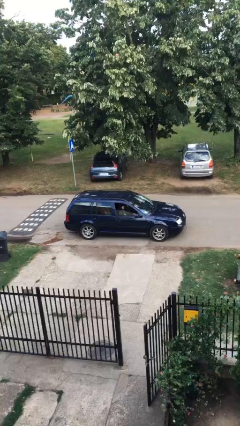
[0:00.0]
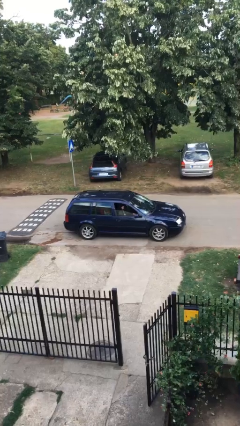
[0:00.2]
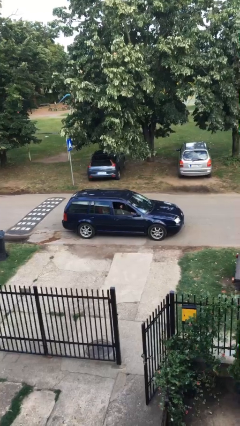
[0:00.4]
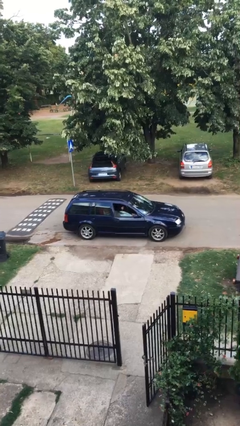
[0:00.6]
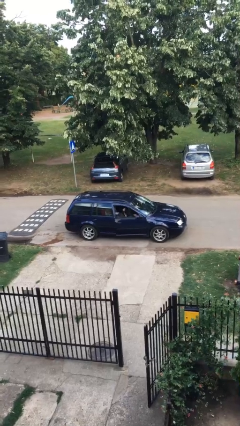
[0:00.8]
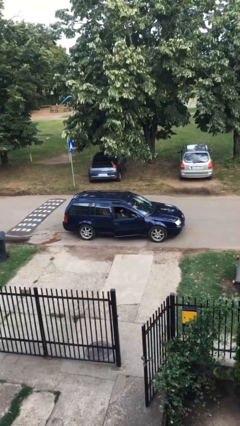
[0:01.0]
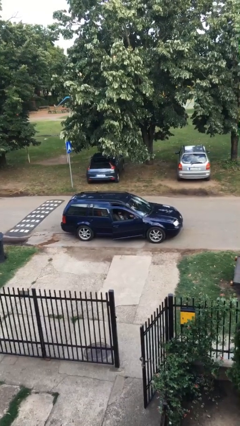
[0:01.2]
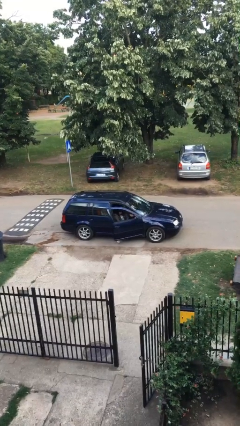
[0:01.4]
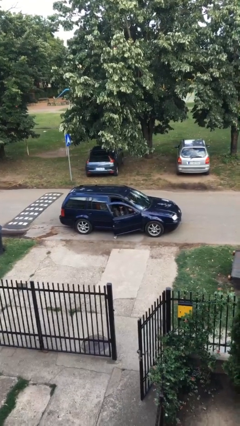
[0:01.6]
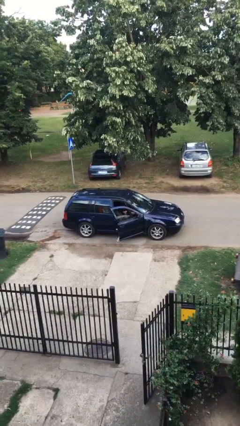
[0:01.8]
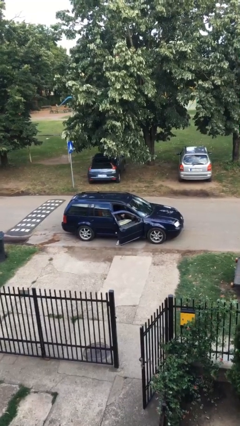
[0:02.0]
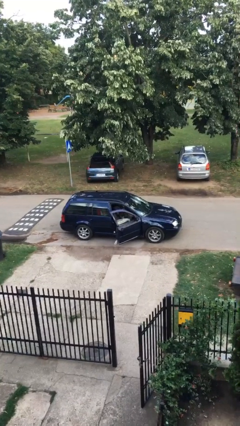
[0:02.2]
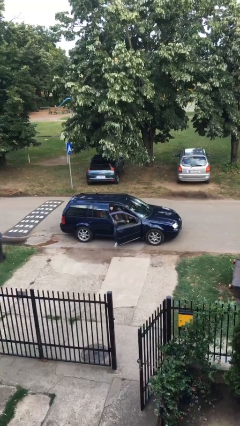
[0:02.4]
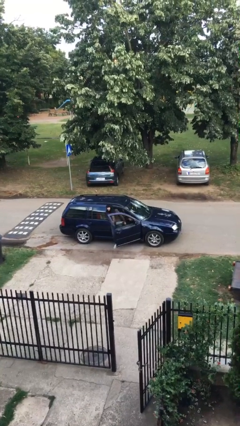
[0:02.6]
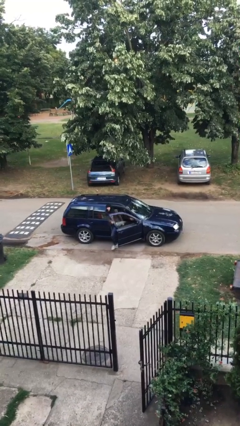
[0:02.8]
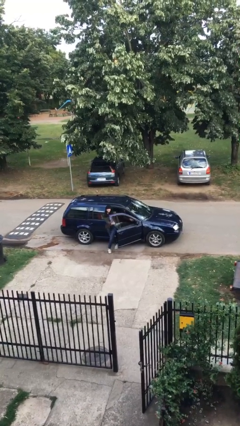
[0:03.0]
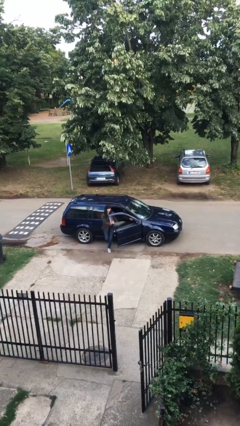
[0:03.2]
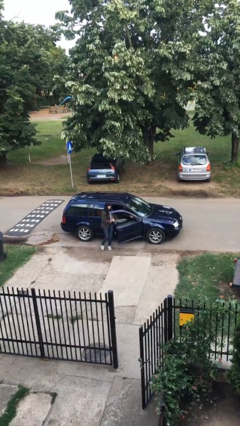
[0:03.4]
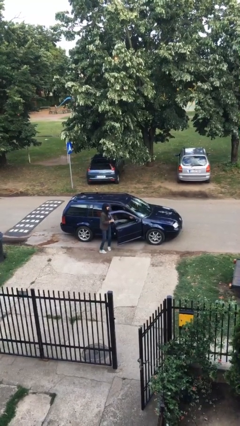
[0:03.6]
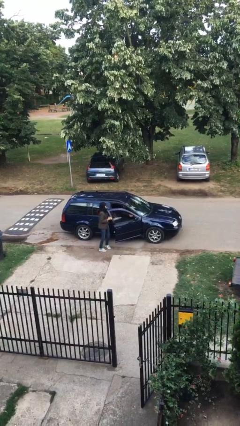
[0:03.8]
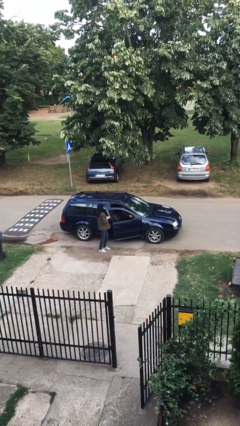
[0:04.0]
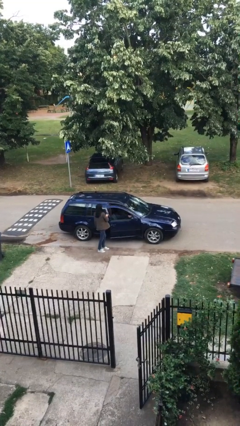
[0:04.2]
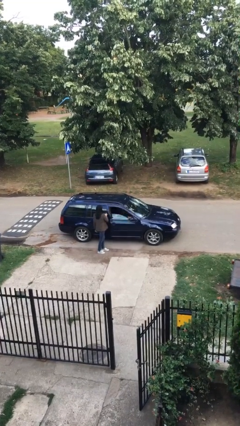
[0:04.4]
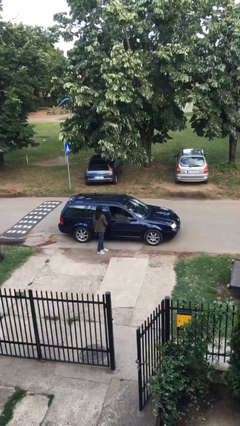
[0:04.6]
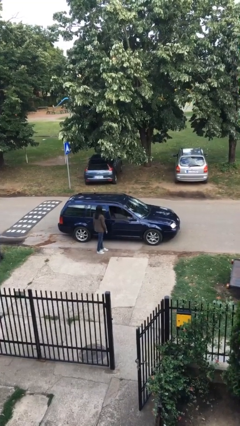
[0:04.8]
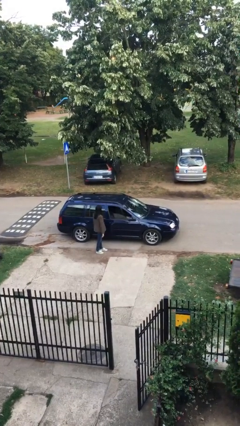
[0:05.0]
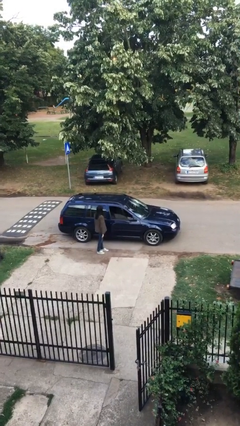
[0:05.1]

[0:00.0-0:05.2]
car drops off person

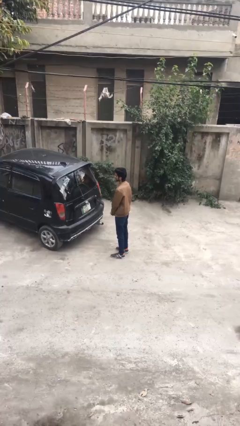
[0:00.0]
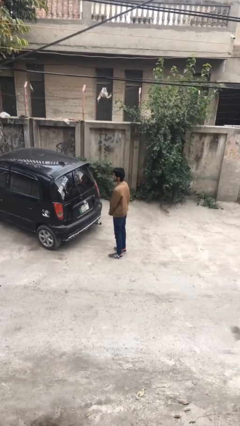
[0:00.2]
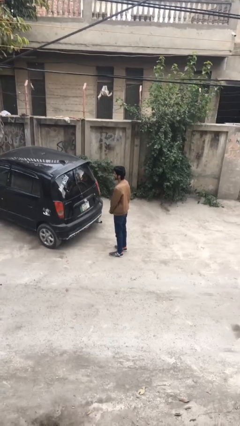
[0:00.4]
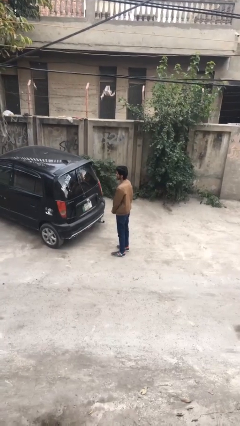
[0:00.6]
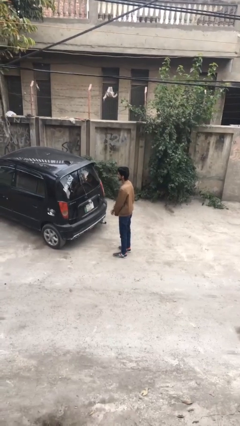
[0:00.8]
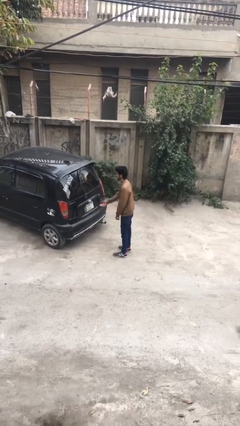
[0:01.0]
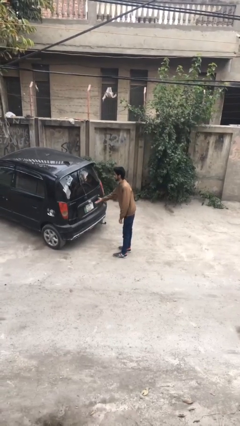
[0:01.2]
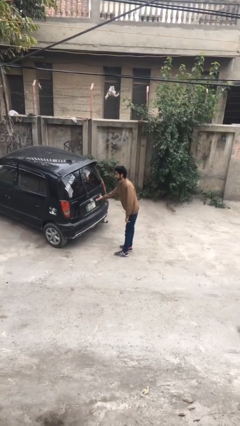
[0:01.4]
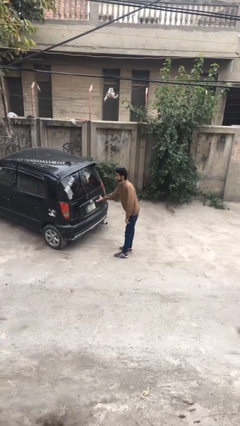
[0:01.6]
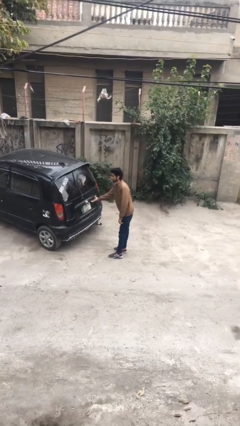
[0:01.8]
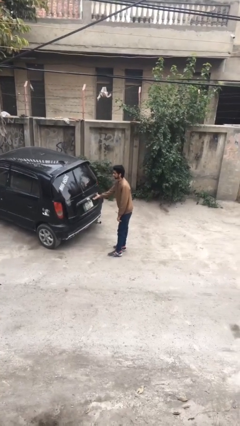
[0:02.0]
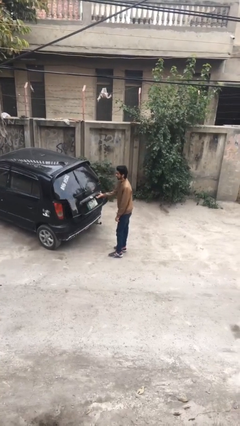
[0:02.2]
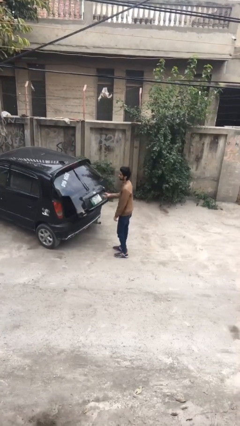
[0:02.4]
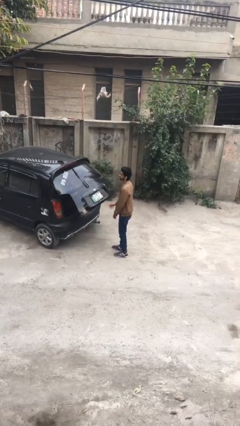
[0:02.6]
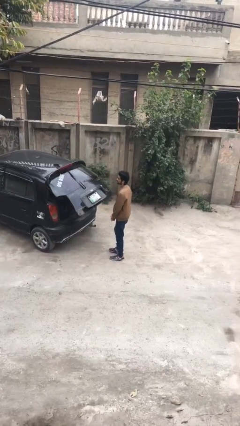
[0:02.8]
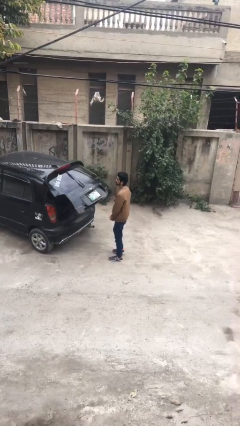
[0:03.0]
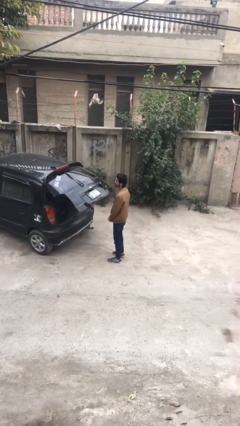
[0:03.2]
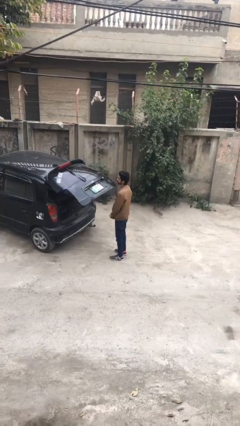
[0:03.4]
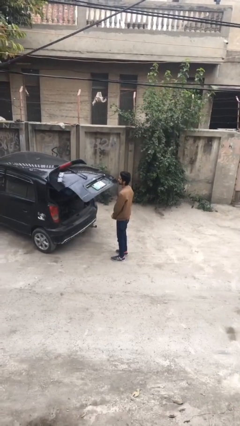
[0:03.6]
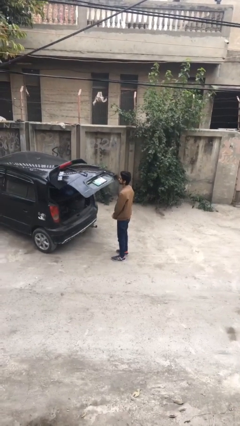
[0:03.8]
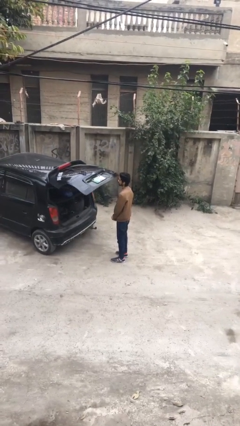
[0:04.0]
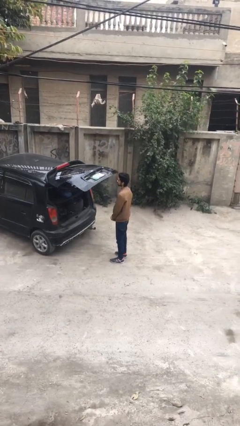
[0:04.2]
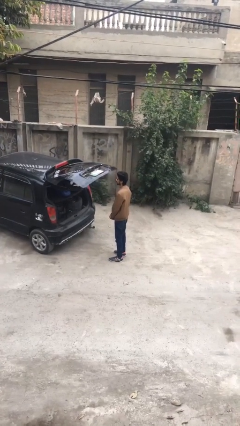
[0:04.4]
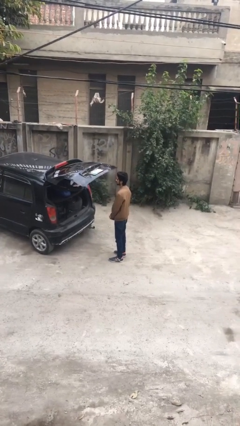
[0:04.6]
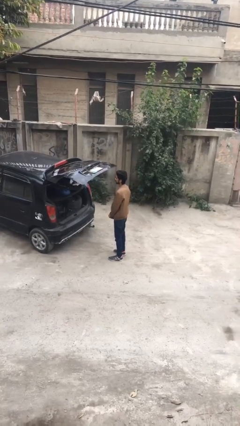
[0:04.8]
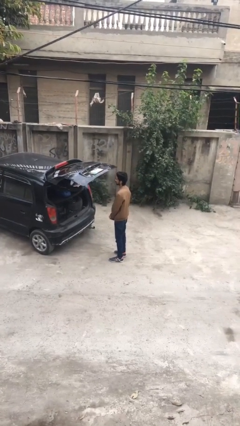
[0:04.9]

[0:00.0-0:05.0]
person opens car trunk

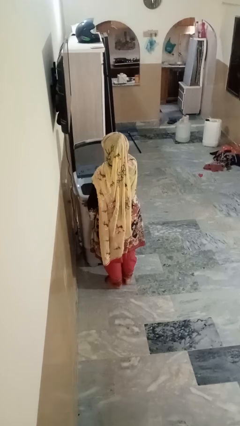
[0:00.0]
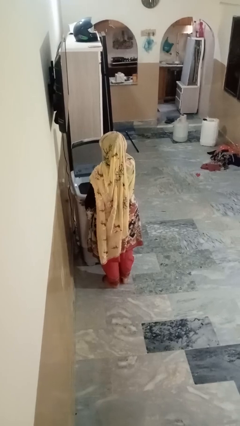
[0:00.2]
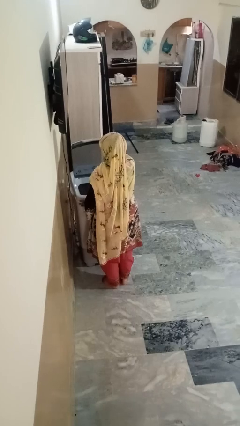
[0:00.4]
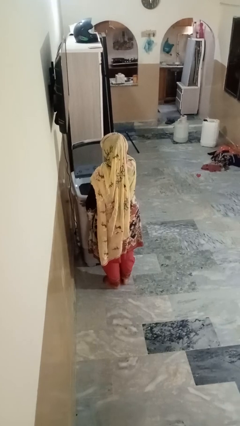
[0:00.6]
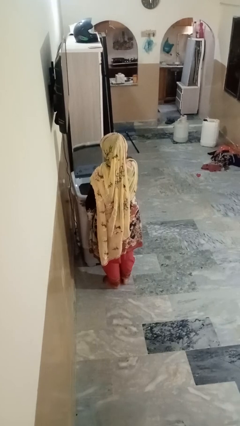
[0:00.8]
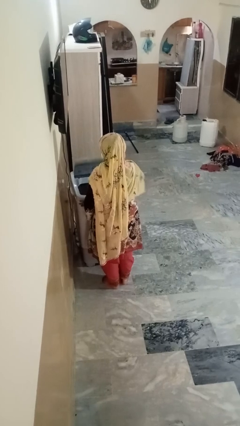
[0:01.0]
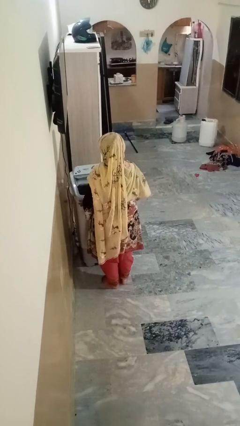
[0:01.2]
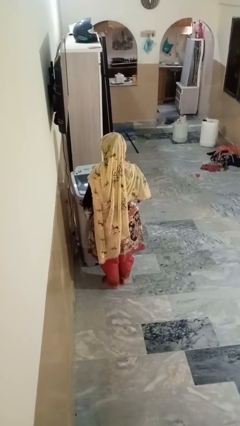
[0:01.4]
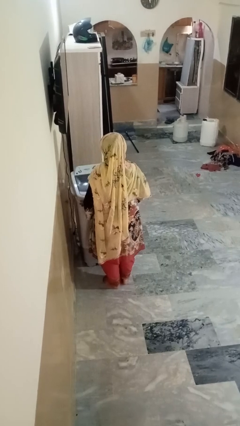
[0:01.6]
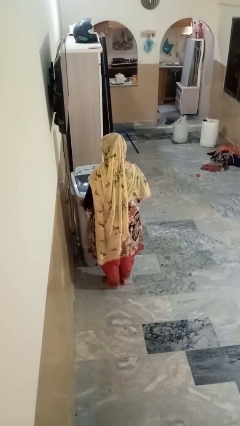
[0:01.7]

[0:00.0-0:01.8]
person closes clothes washer

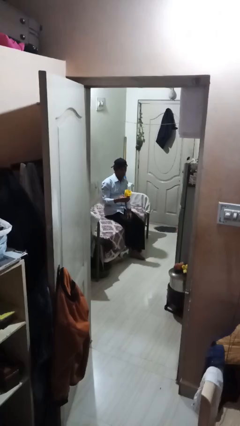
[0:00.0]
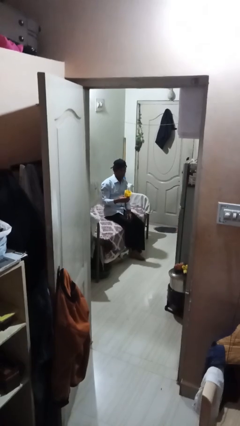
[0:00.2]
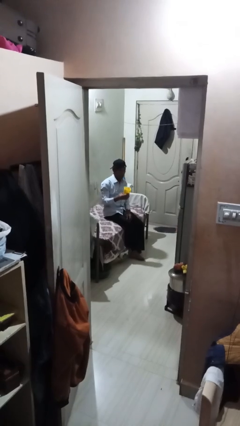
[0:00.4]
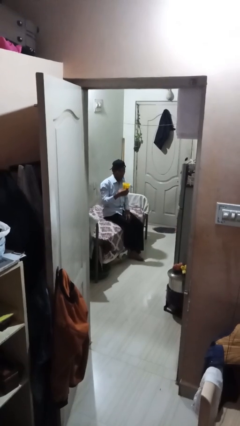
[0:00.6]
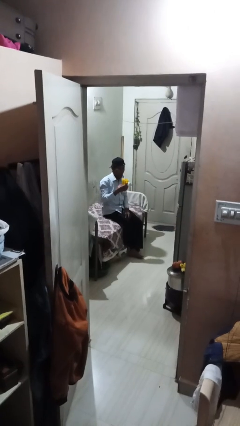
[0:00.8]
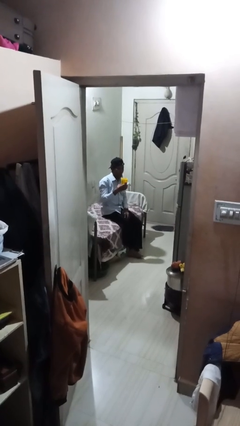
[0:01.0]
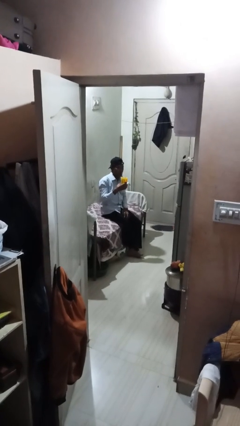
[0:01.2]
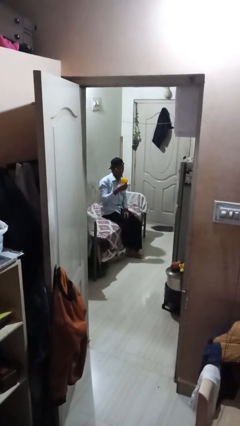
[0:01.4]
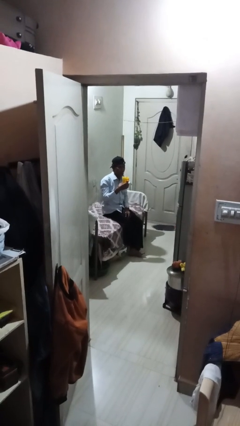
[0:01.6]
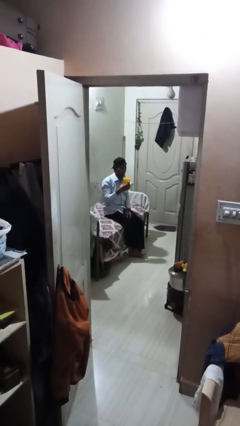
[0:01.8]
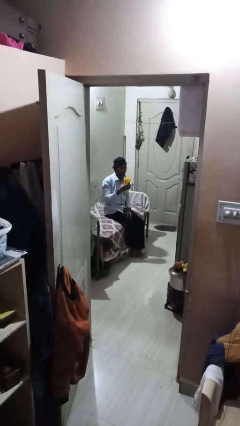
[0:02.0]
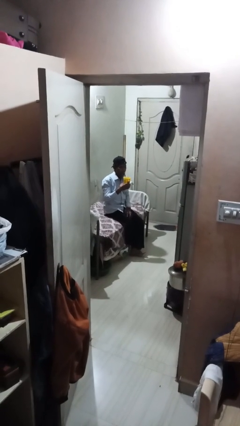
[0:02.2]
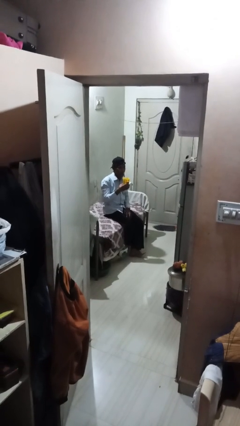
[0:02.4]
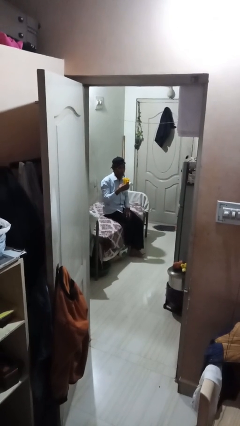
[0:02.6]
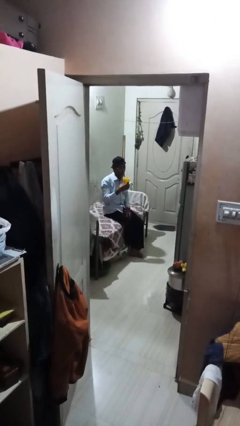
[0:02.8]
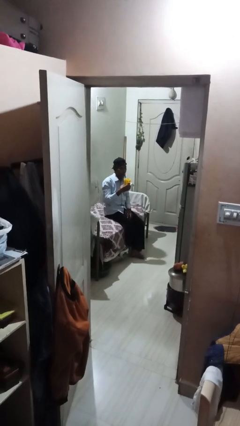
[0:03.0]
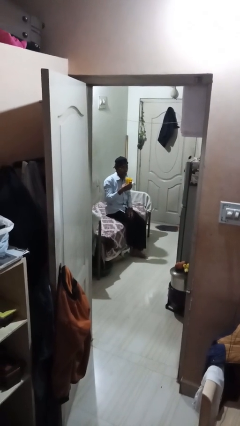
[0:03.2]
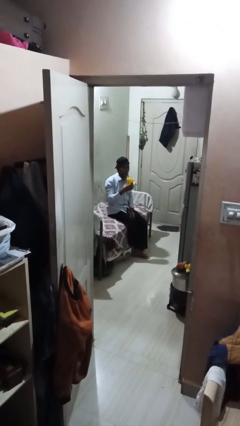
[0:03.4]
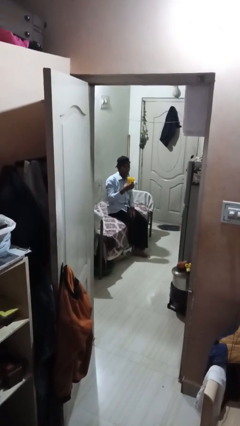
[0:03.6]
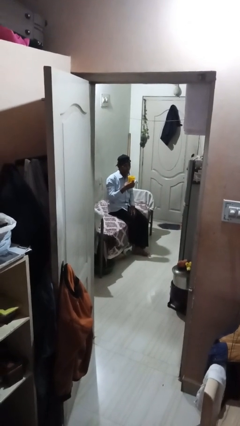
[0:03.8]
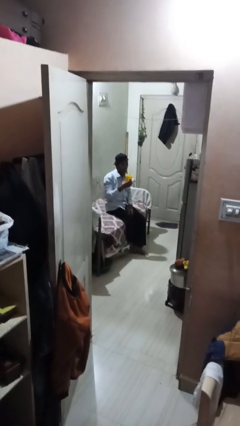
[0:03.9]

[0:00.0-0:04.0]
person drinks from straw

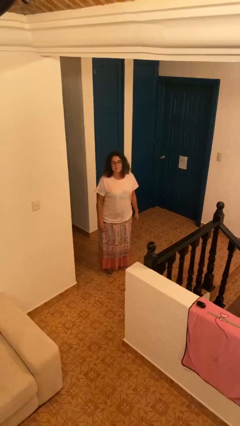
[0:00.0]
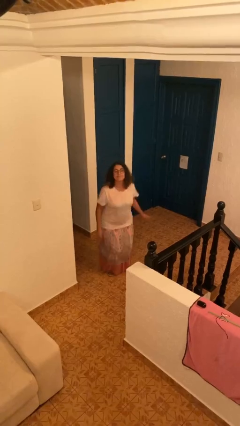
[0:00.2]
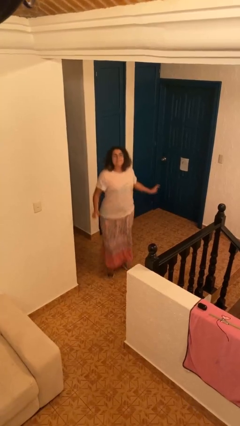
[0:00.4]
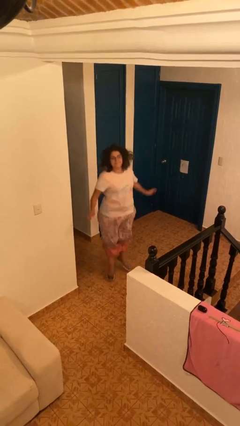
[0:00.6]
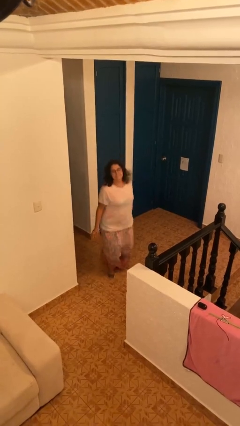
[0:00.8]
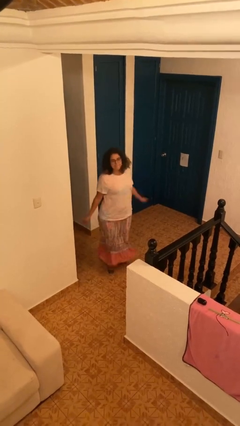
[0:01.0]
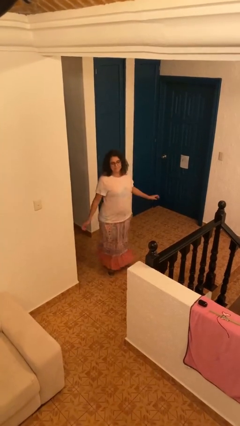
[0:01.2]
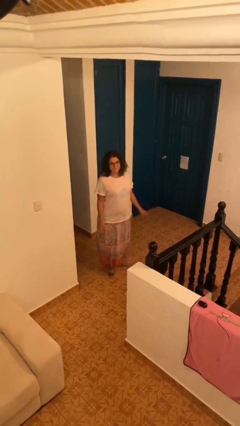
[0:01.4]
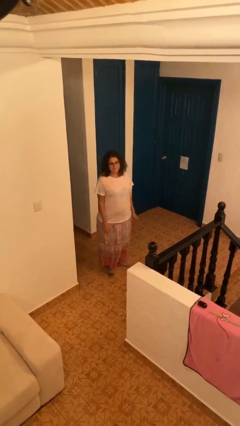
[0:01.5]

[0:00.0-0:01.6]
person jumps
